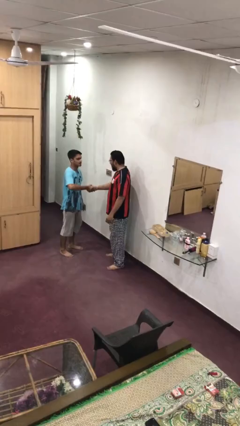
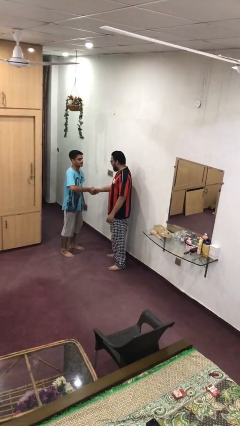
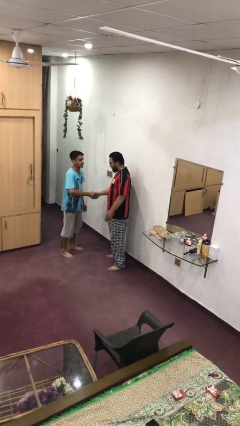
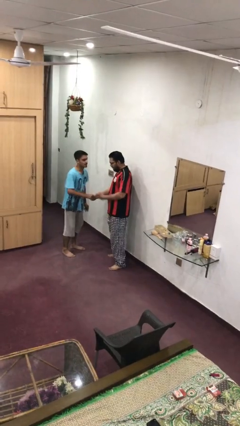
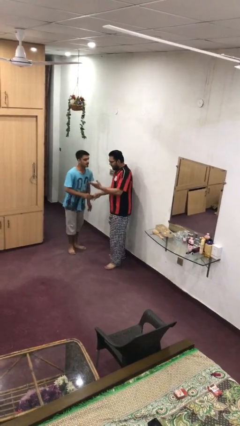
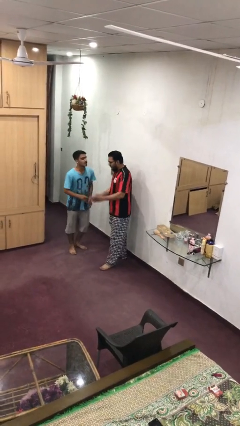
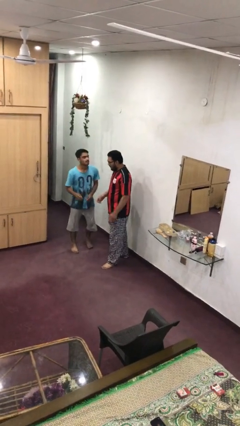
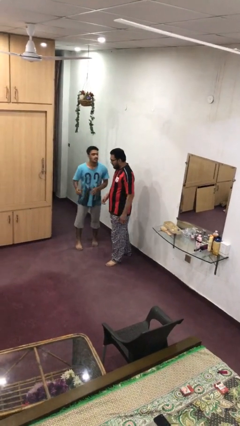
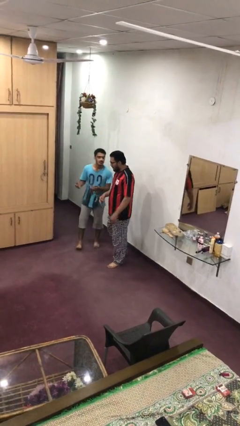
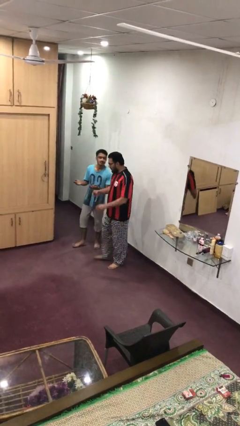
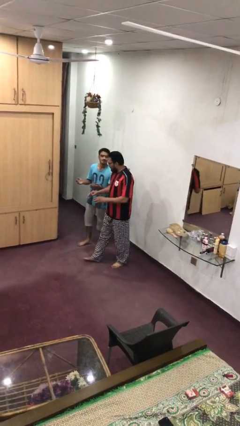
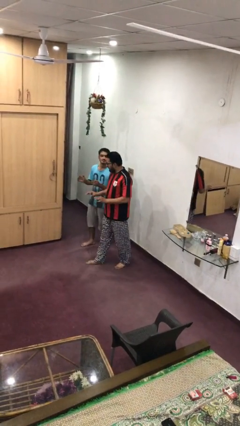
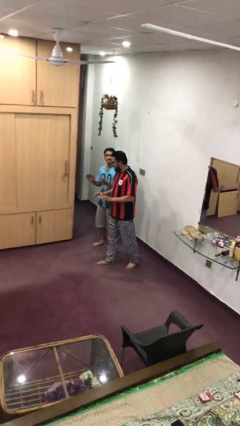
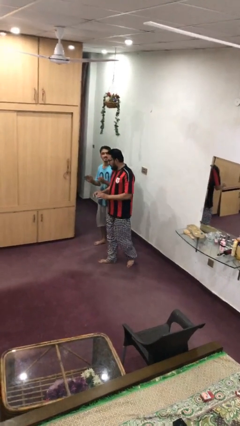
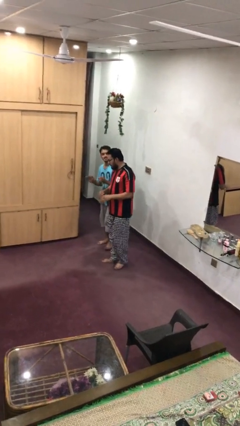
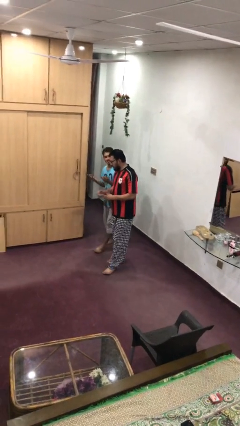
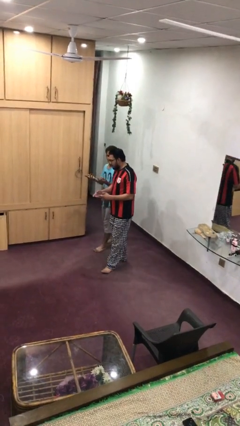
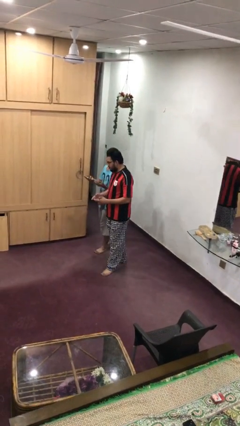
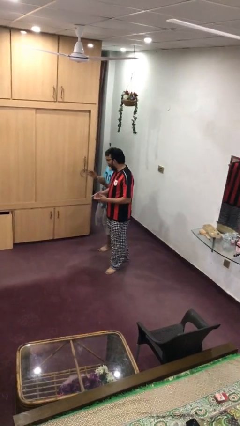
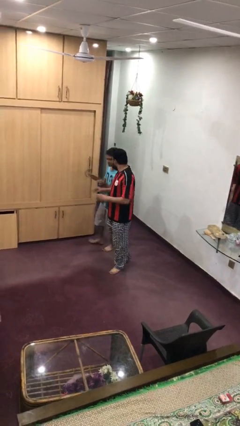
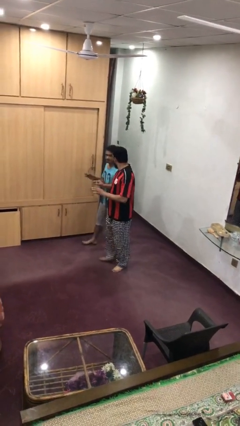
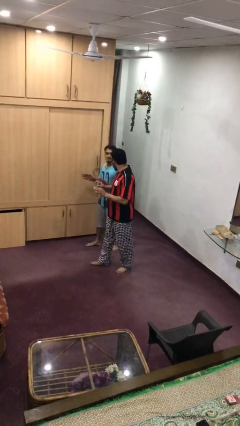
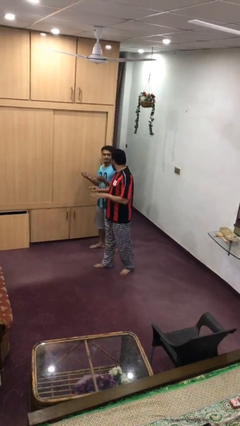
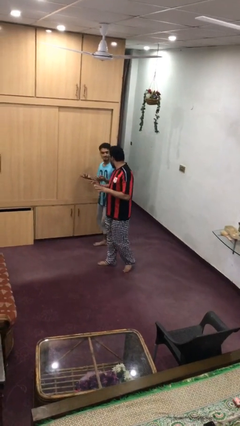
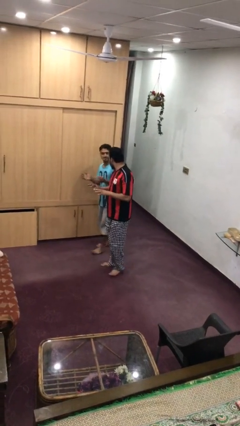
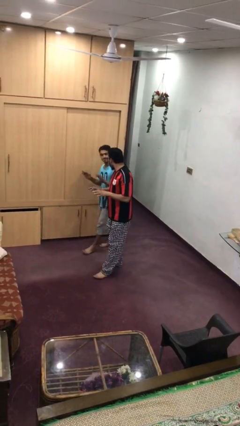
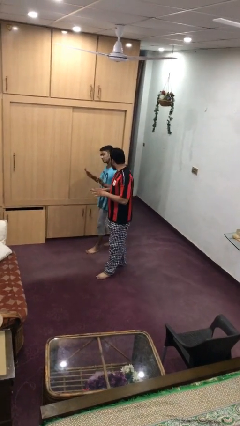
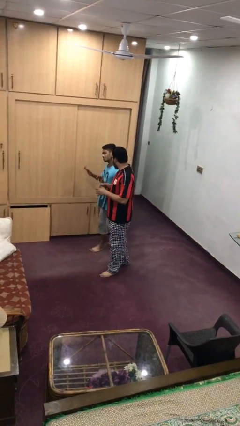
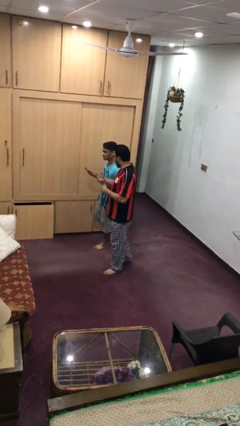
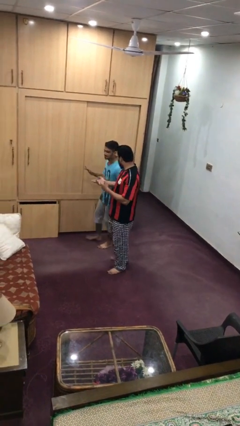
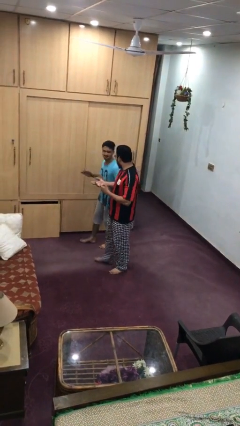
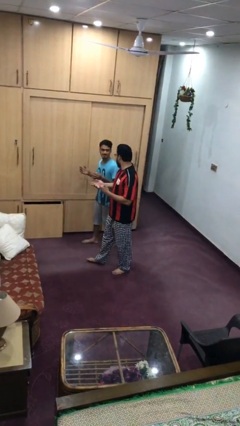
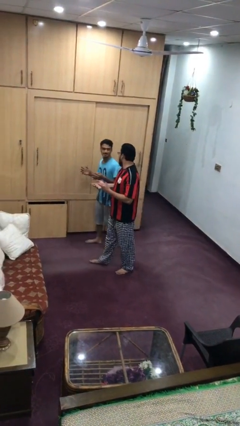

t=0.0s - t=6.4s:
person talks to person

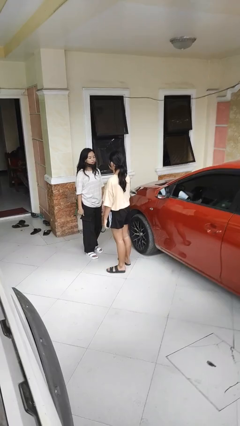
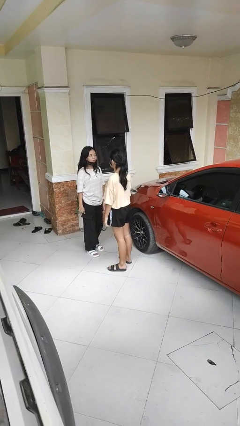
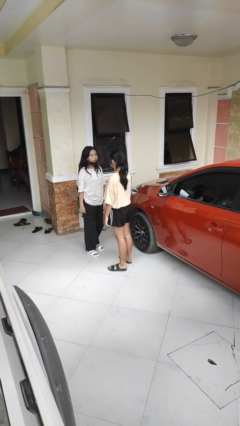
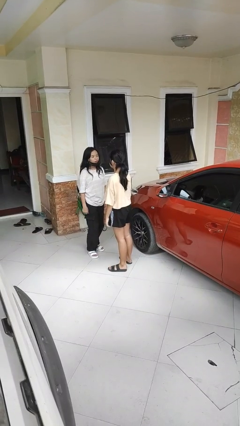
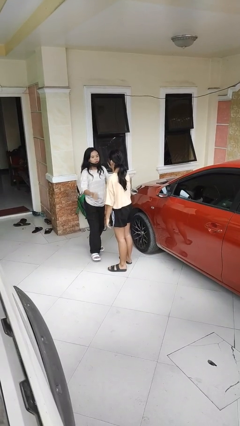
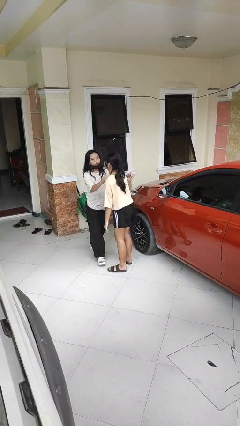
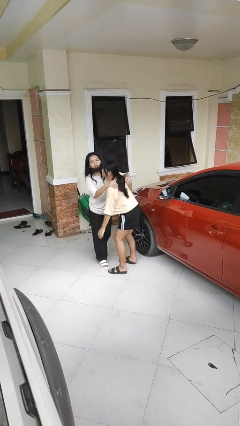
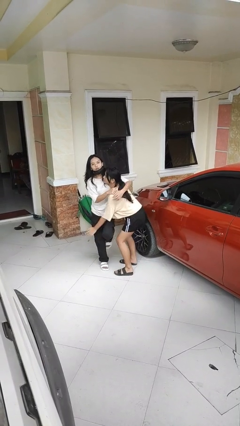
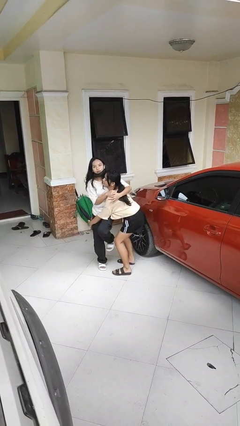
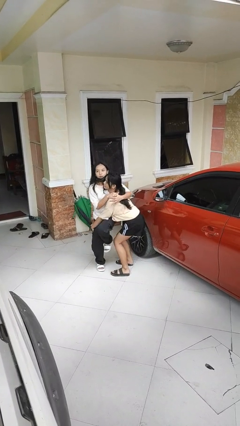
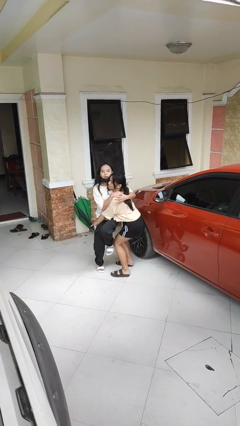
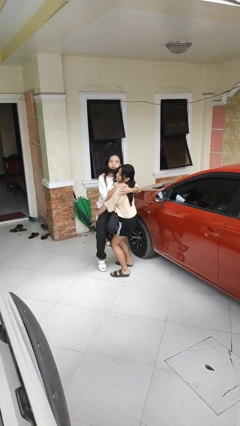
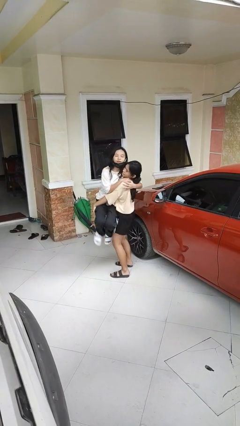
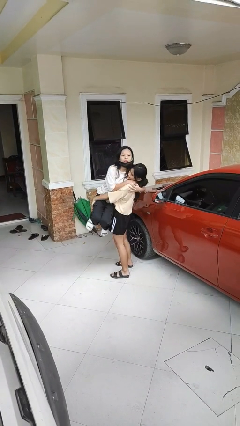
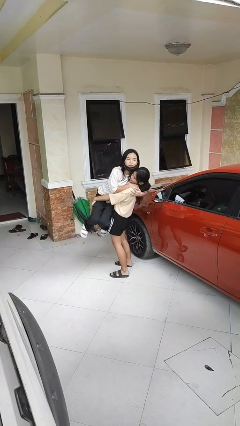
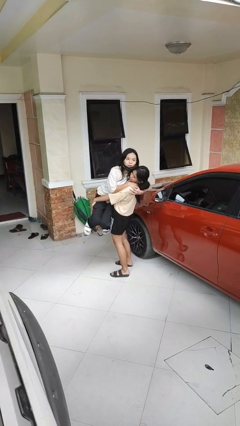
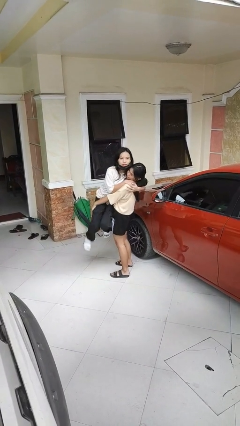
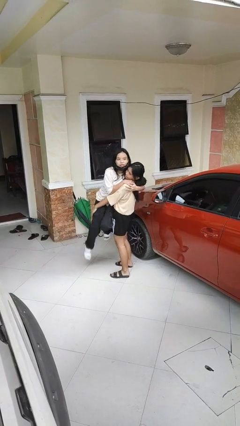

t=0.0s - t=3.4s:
person picks up person

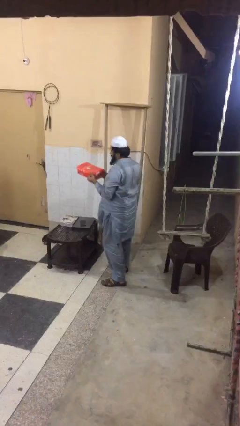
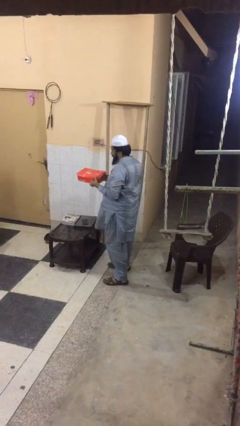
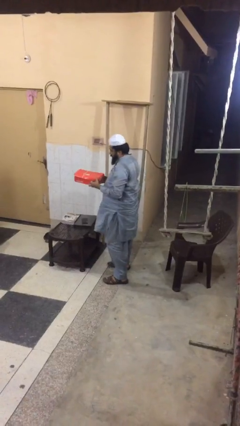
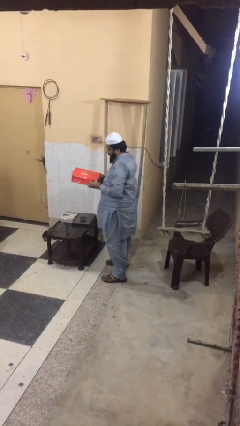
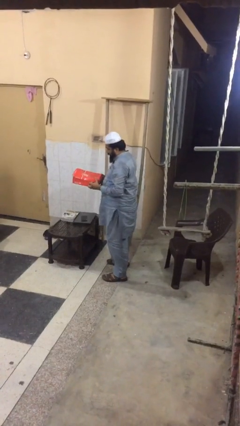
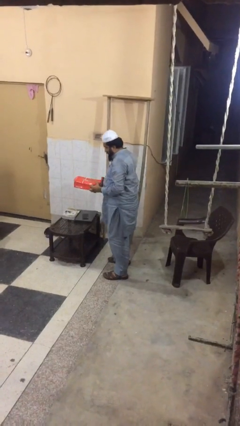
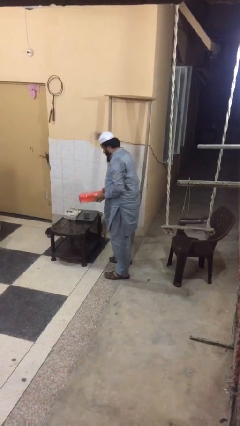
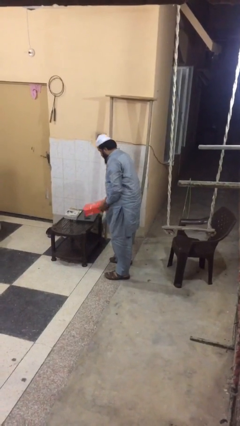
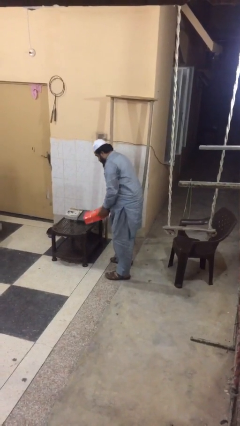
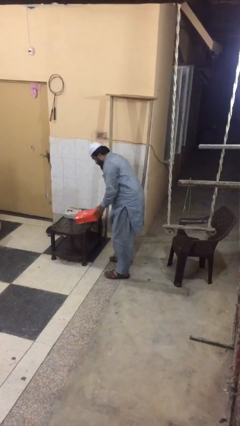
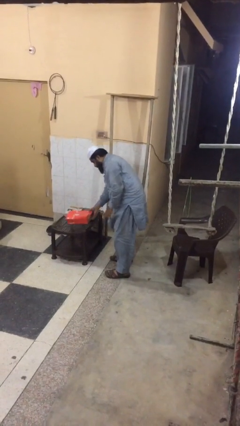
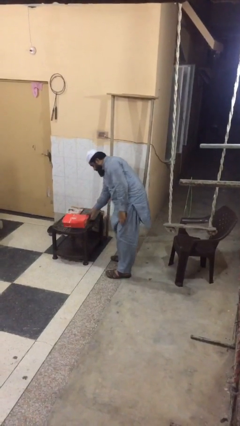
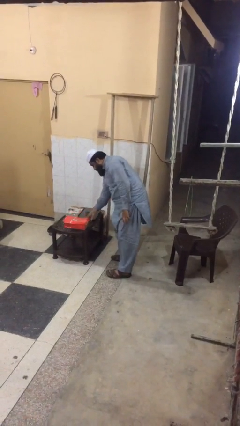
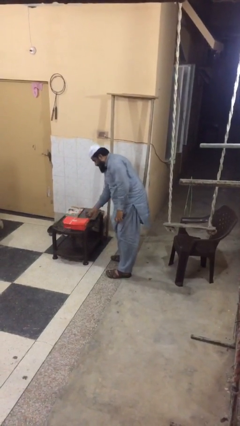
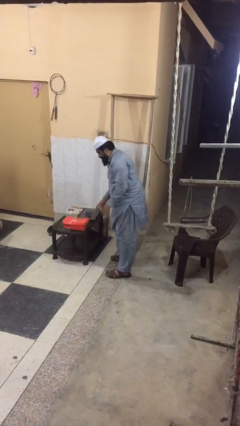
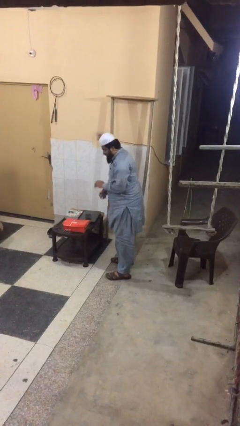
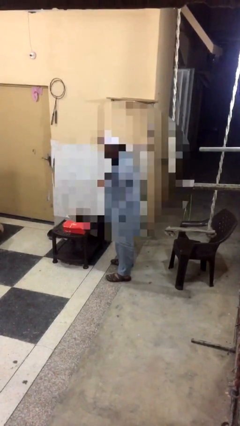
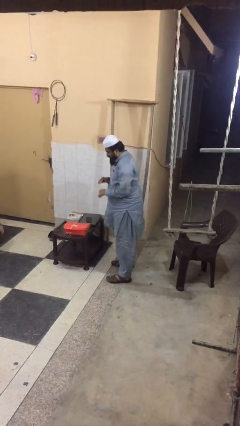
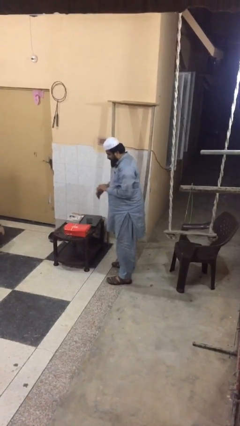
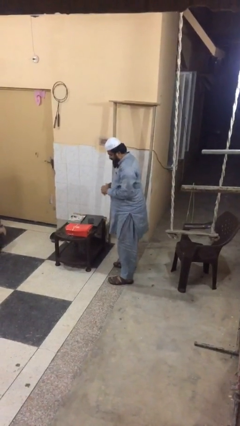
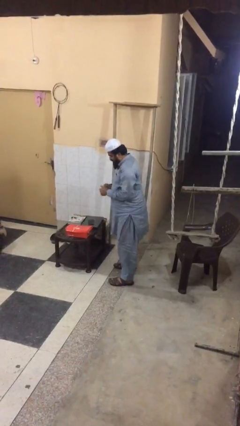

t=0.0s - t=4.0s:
person puts down object on table

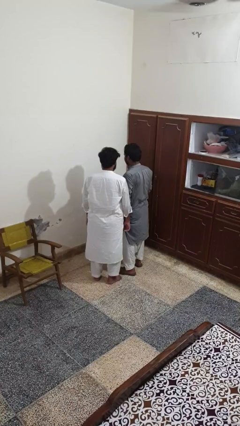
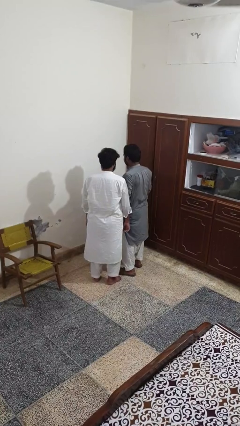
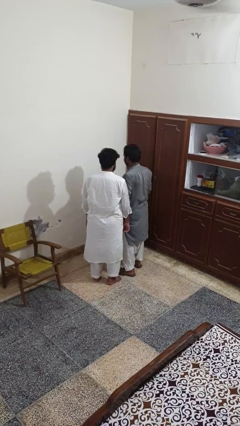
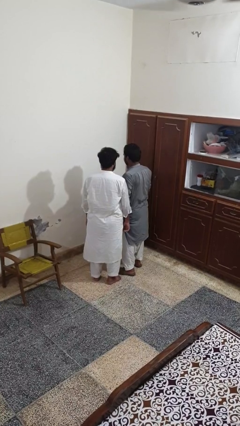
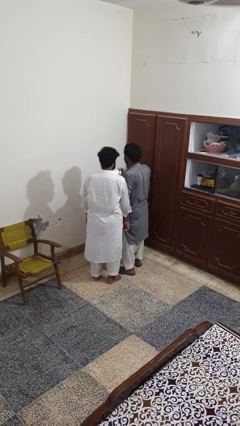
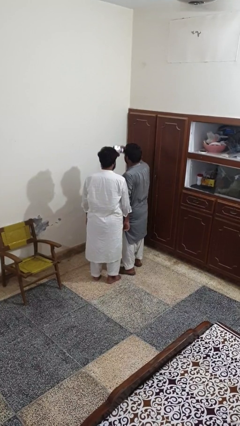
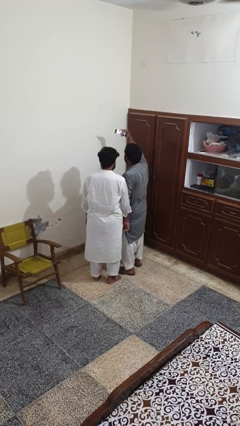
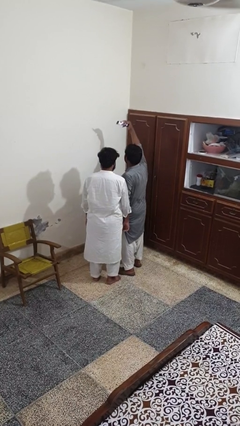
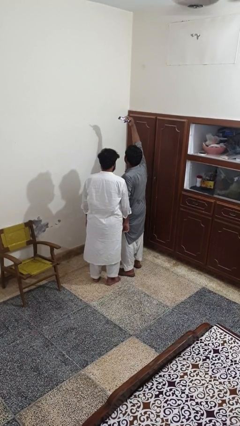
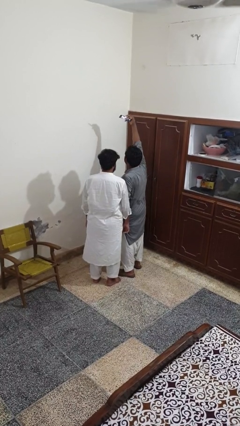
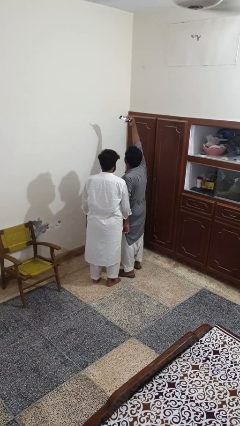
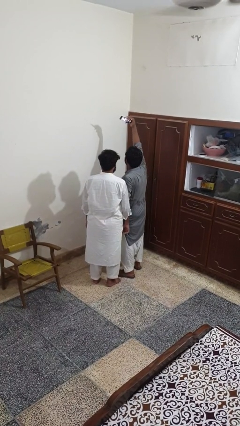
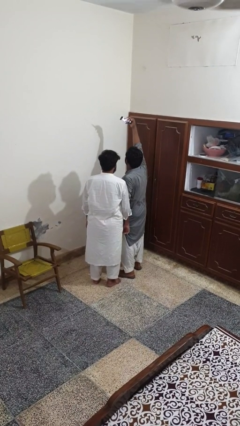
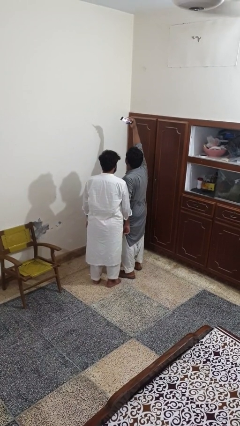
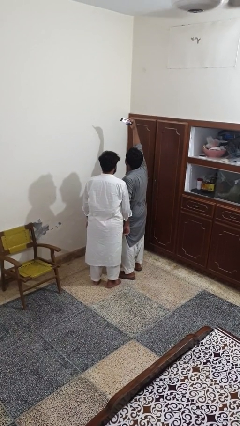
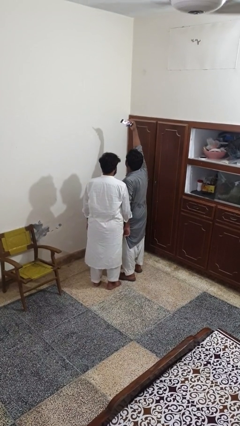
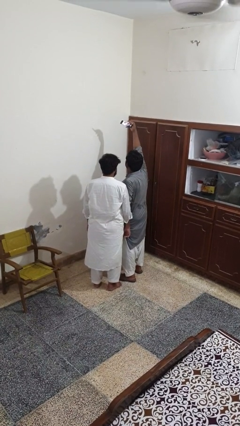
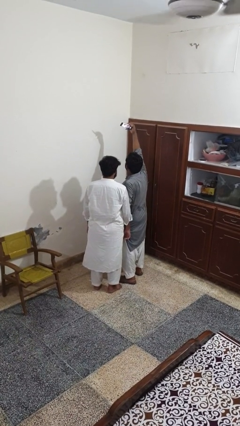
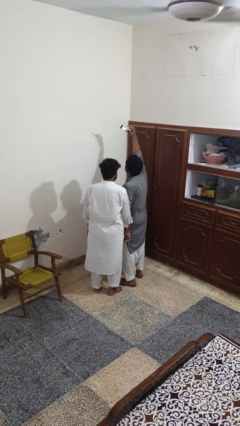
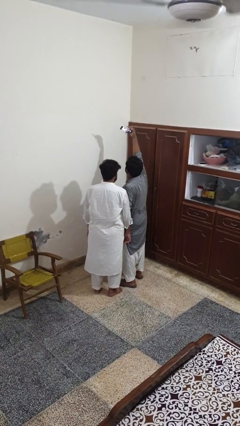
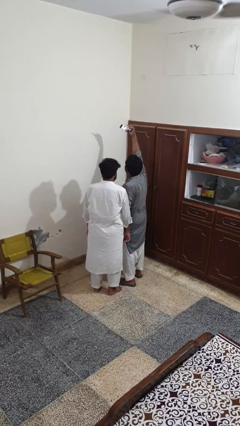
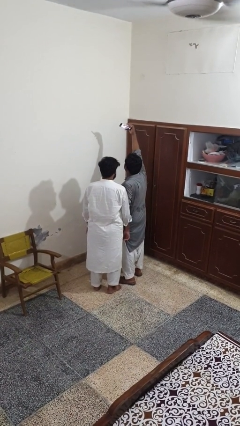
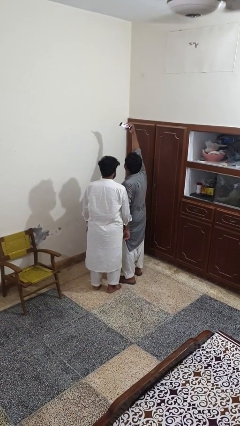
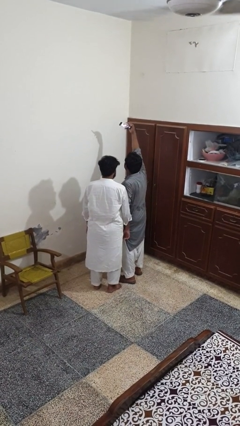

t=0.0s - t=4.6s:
person takes selfie with person
